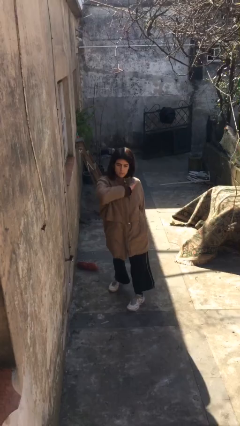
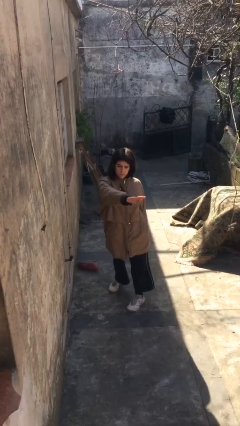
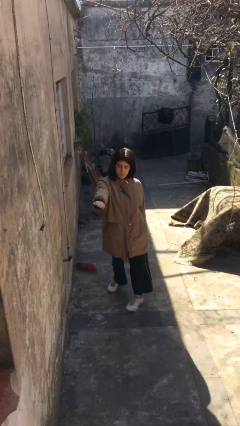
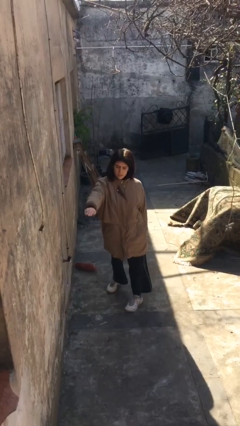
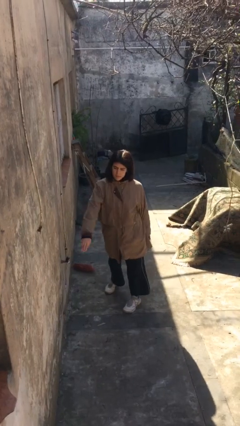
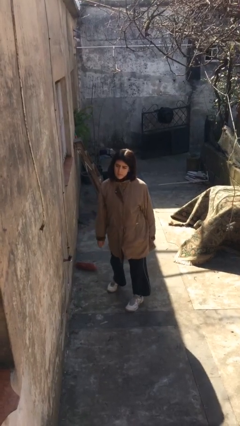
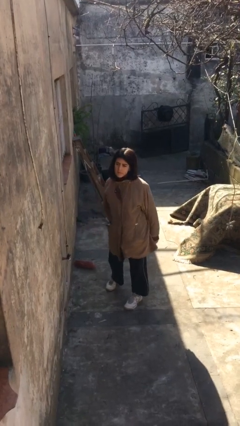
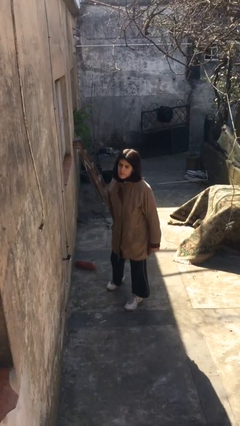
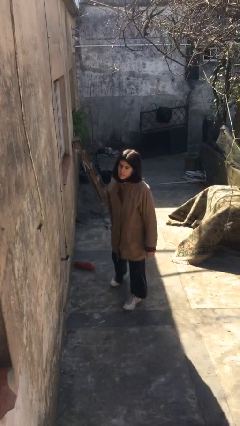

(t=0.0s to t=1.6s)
person karate chop

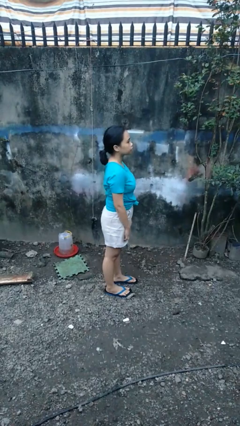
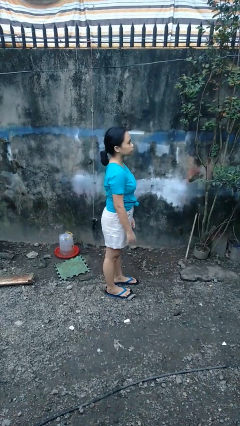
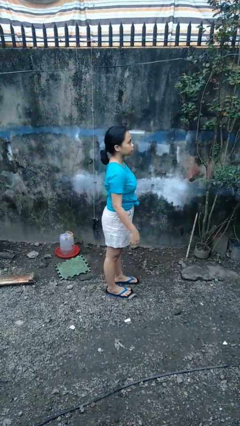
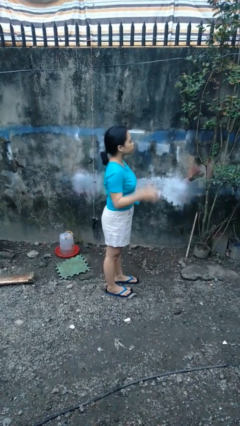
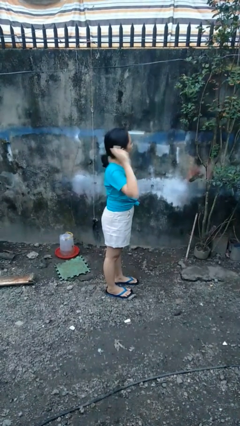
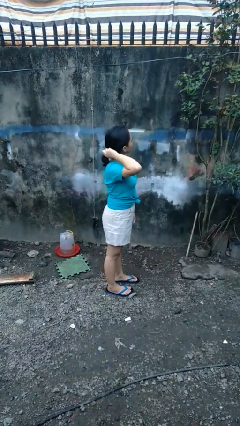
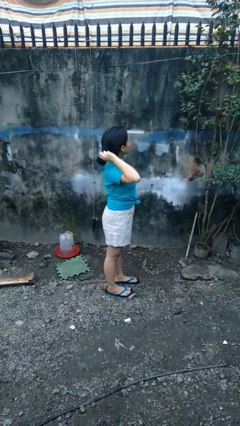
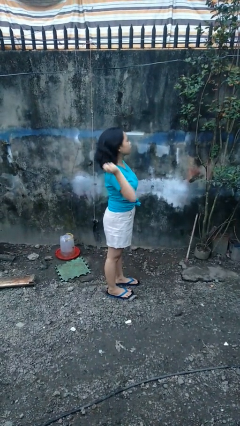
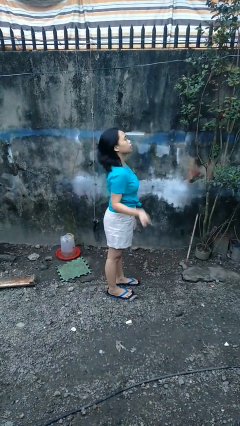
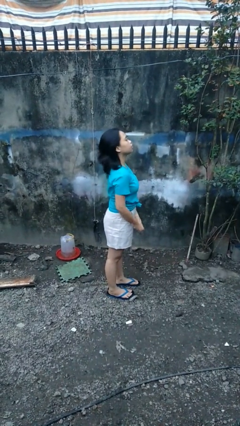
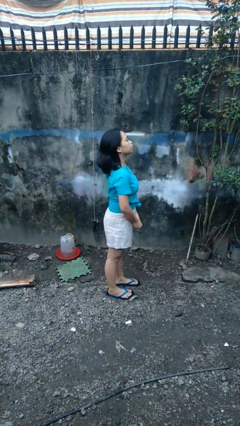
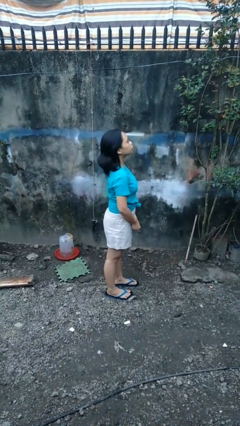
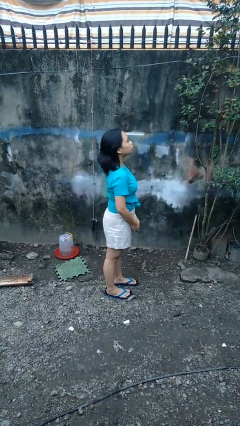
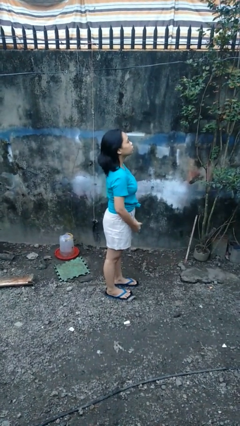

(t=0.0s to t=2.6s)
person takes off hairtie

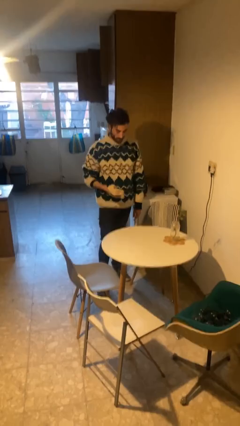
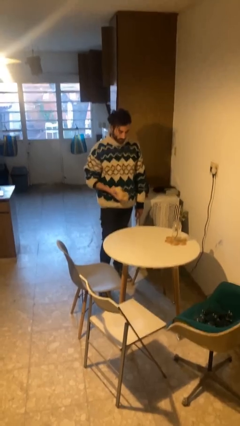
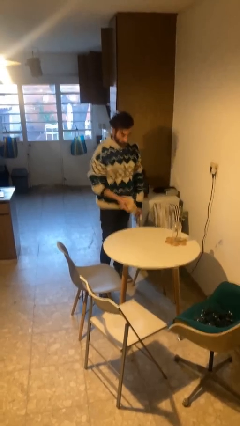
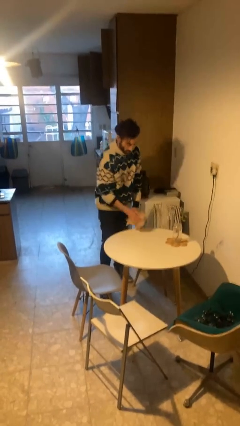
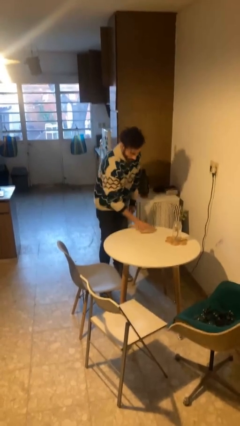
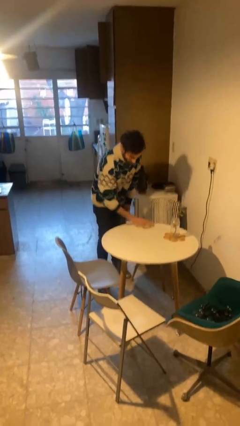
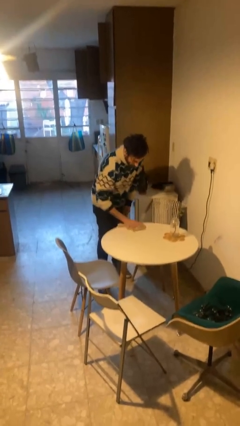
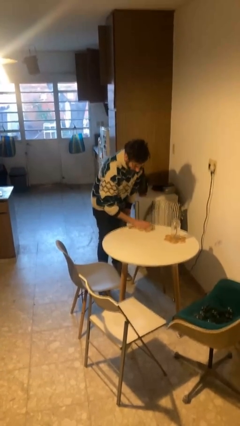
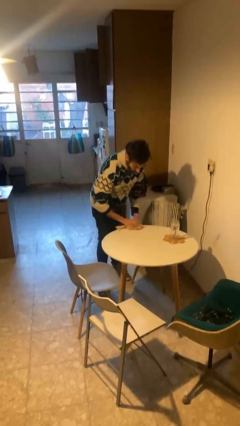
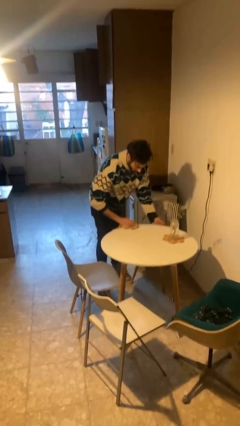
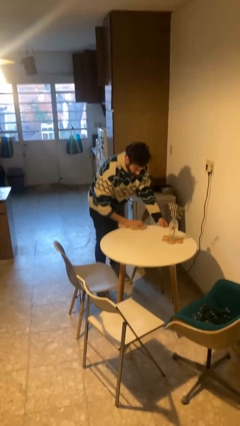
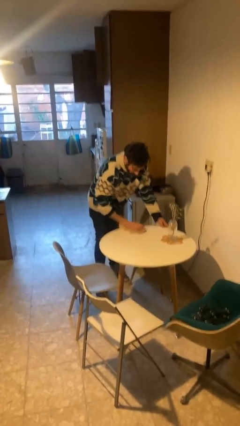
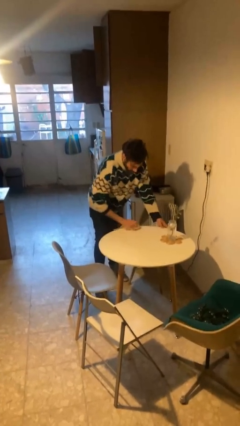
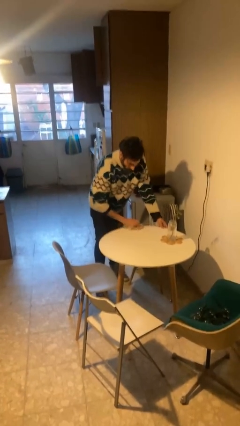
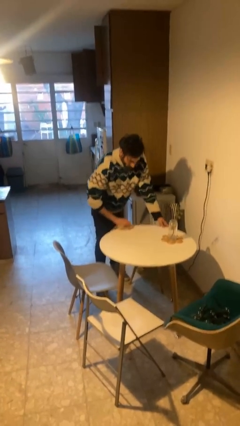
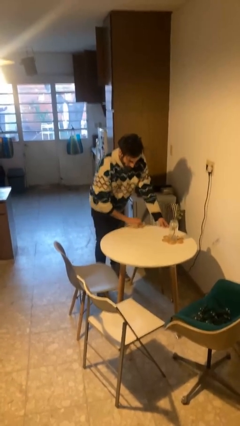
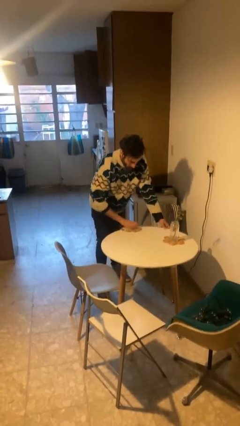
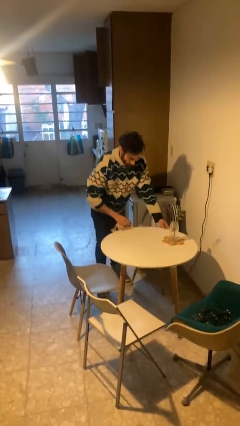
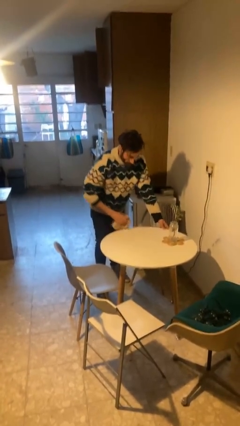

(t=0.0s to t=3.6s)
person cleans table with rag

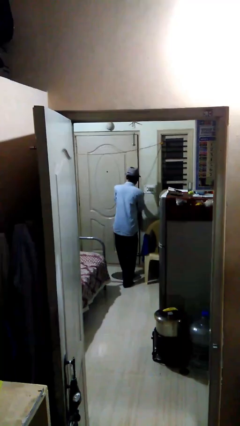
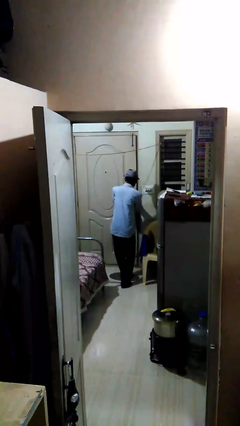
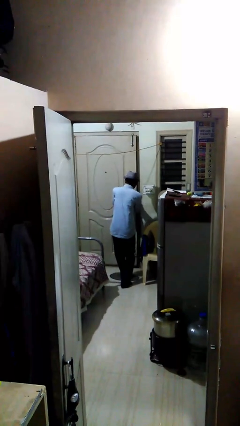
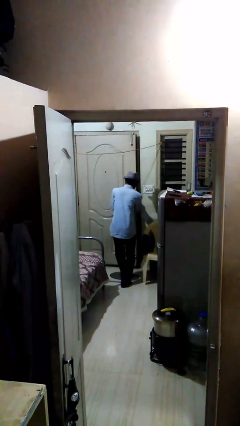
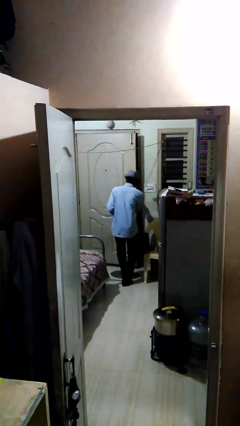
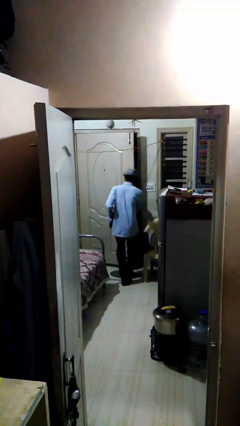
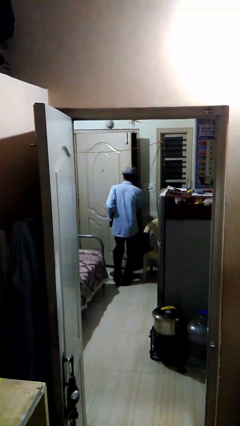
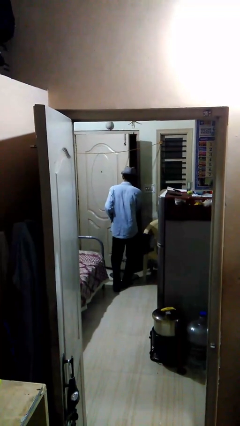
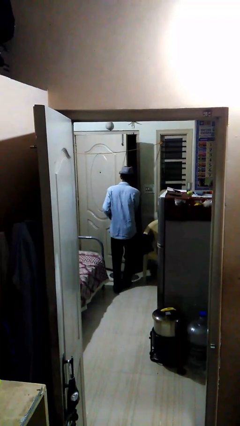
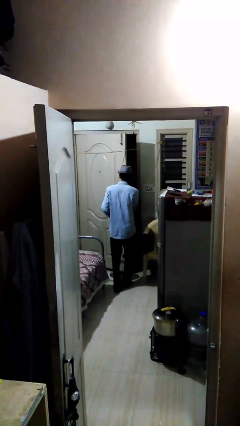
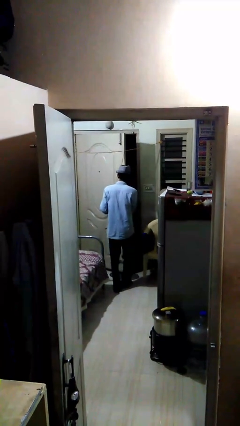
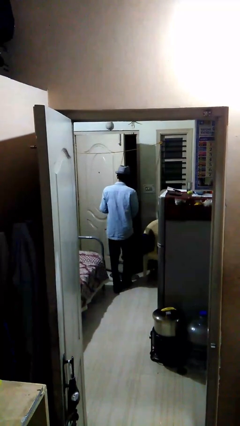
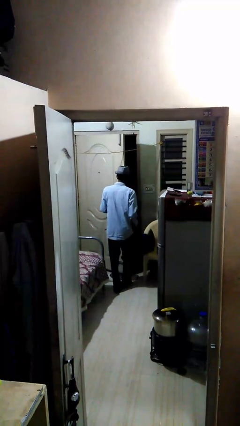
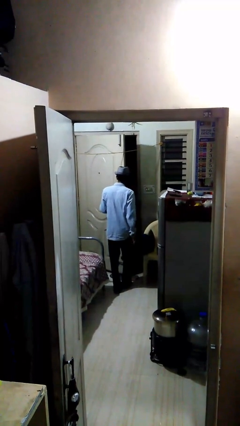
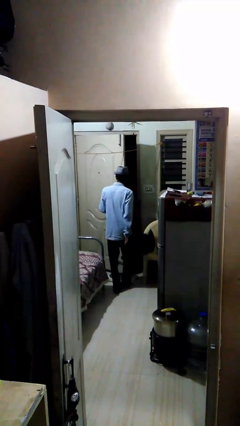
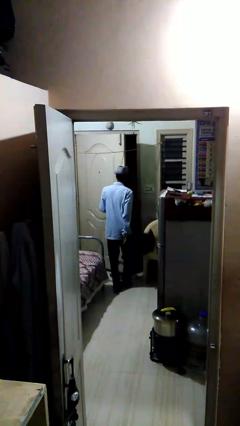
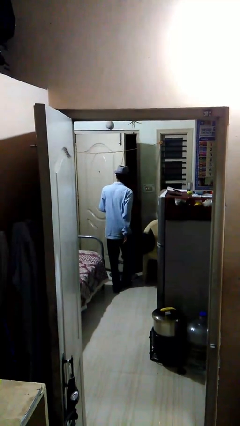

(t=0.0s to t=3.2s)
person opens facility door

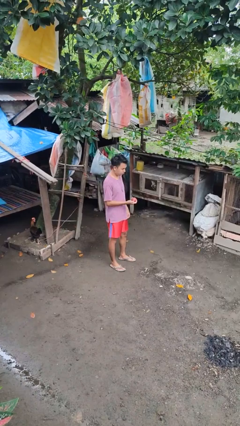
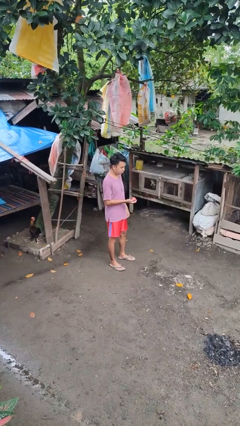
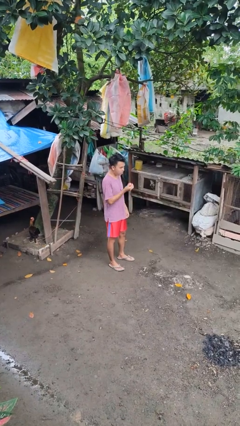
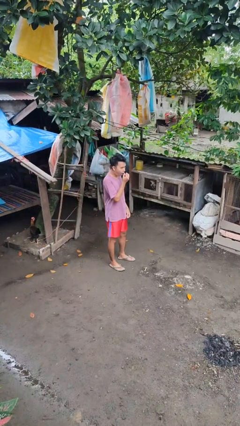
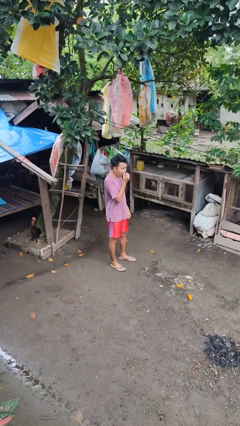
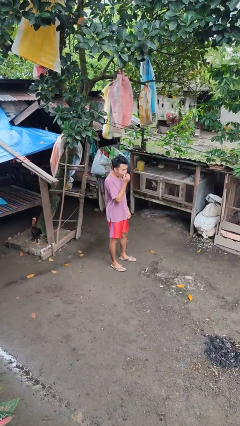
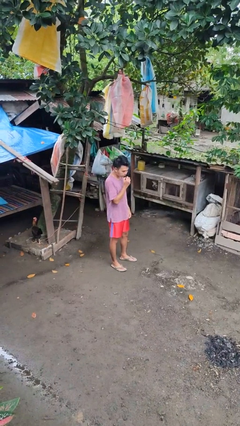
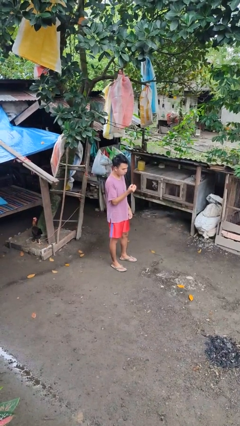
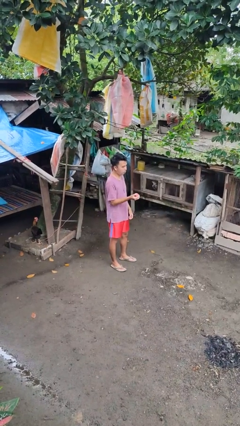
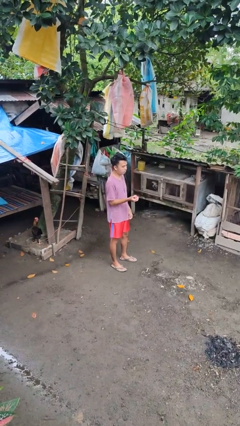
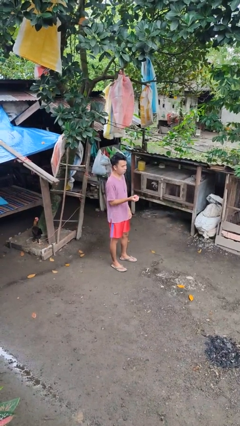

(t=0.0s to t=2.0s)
person eats apple

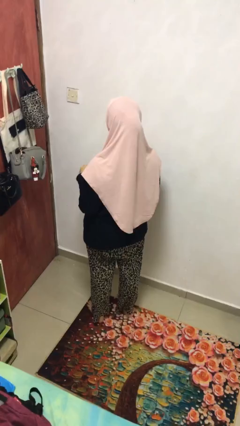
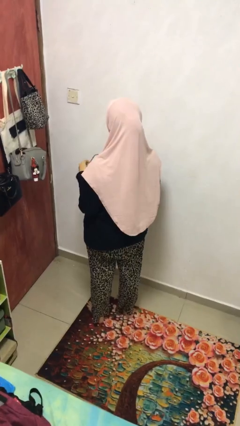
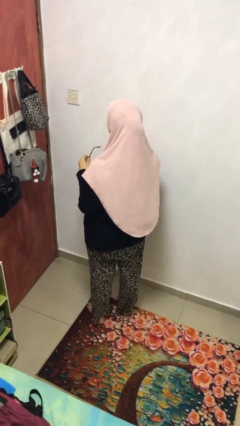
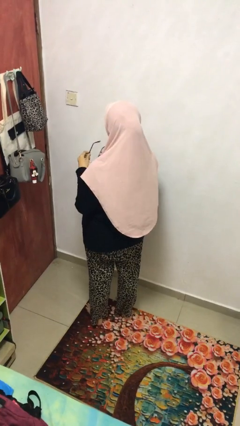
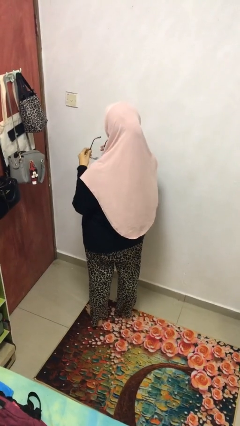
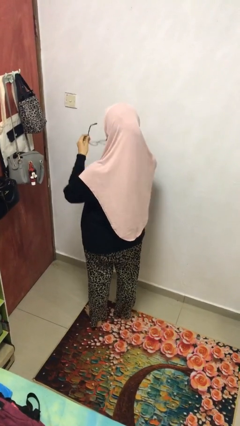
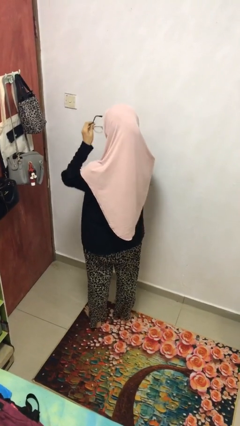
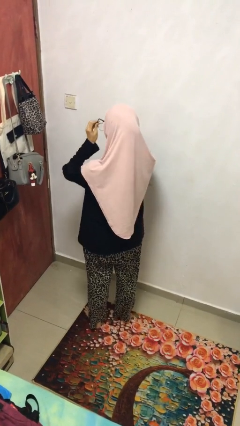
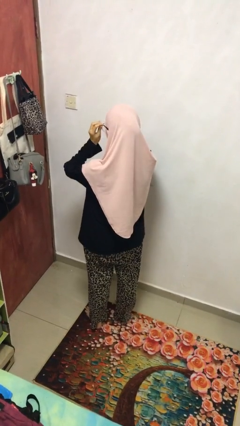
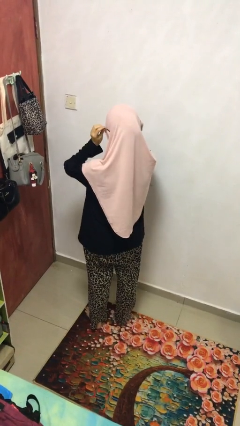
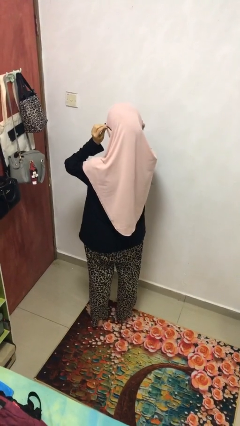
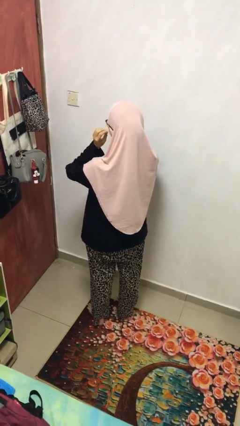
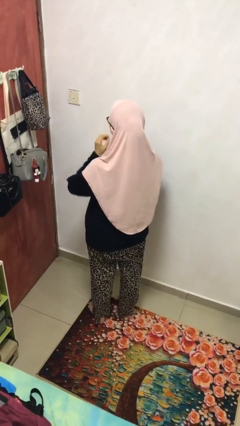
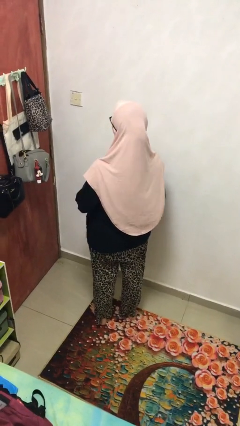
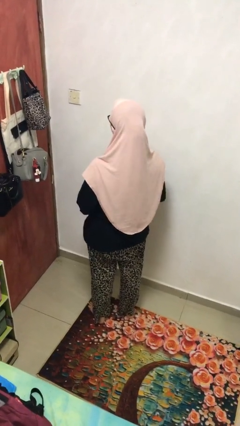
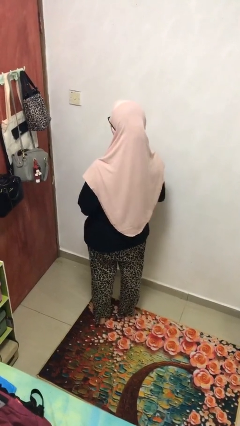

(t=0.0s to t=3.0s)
person puts on glasses

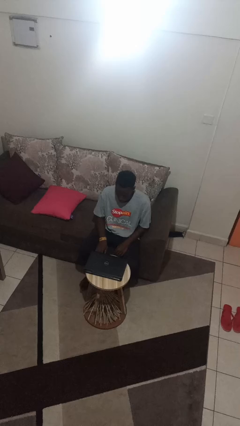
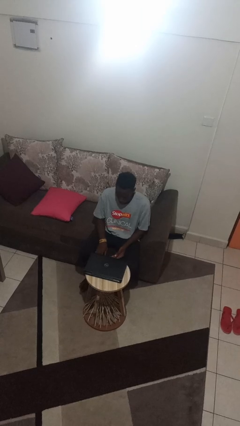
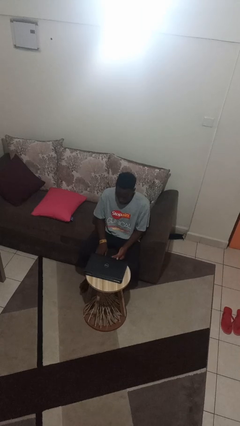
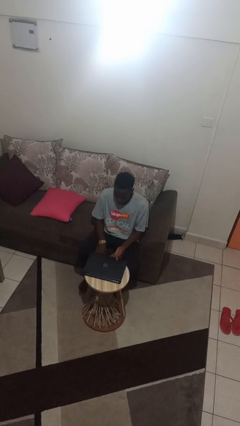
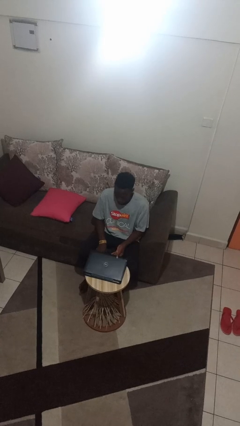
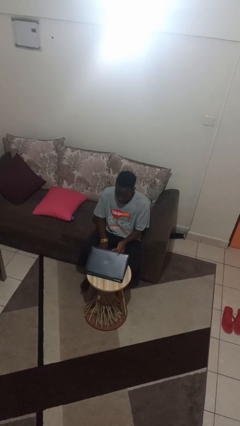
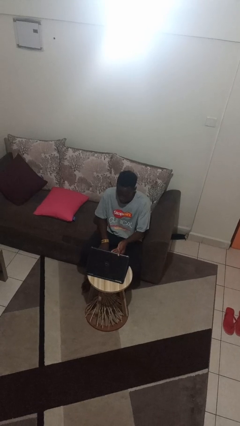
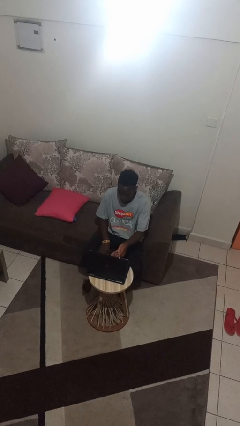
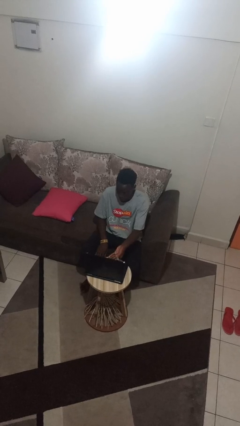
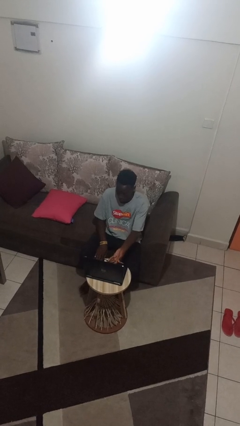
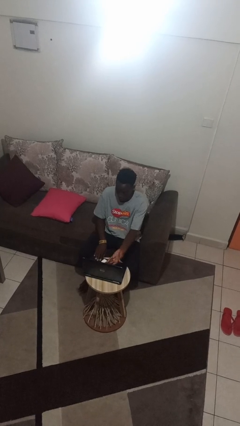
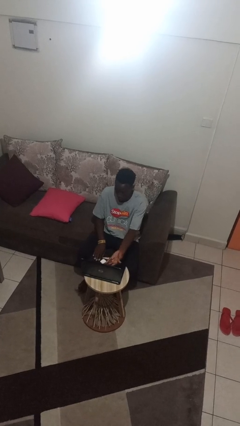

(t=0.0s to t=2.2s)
person opens laptop
